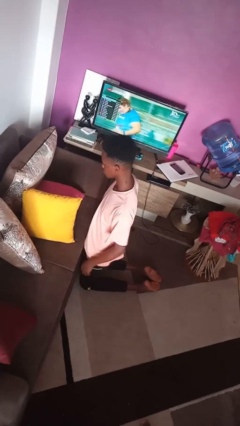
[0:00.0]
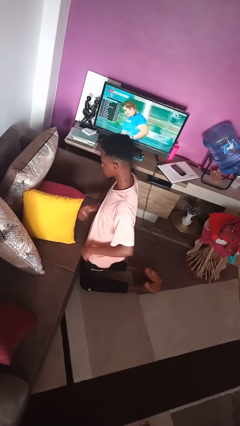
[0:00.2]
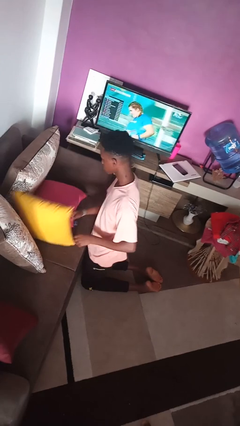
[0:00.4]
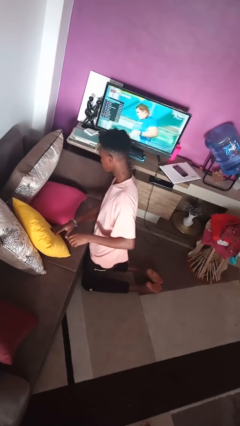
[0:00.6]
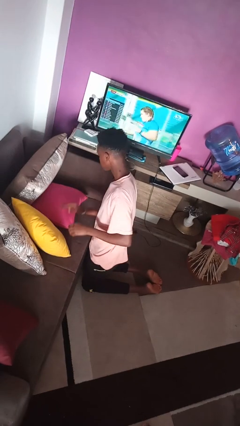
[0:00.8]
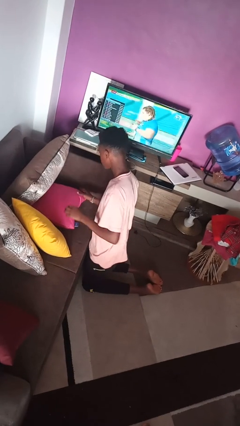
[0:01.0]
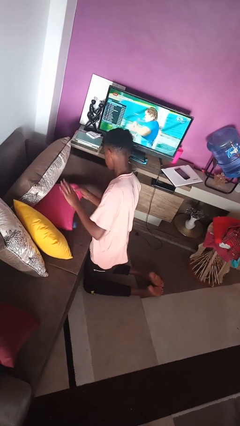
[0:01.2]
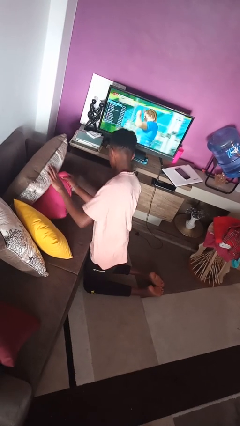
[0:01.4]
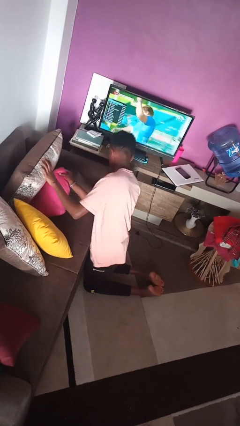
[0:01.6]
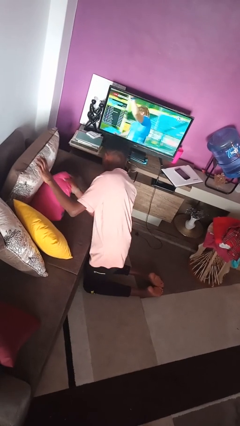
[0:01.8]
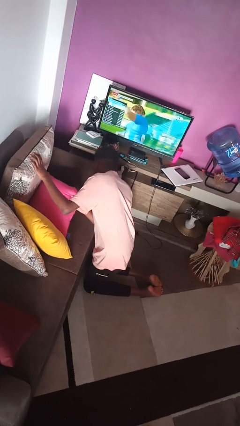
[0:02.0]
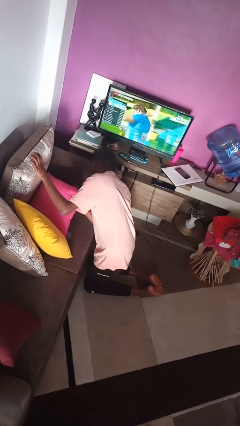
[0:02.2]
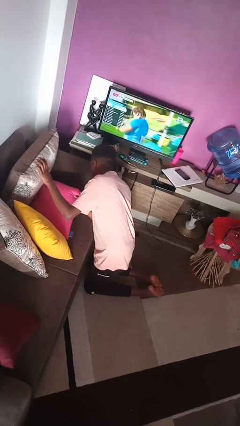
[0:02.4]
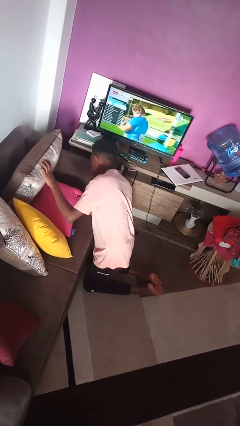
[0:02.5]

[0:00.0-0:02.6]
person searches in couch

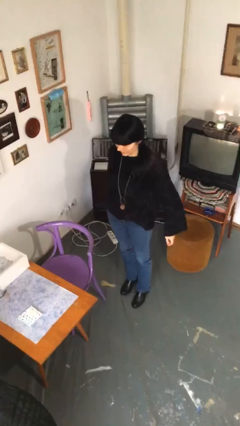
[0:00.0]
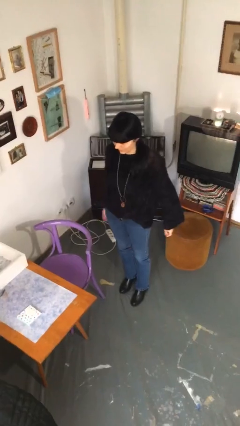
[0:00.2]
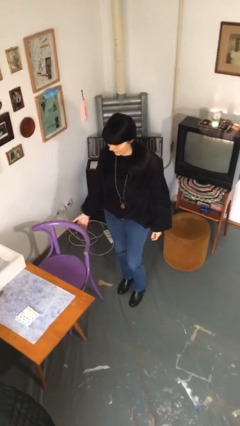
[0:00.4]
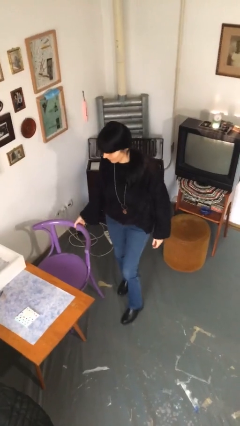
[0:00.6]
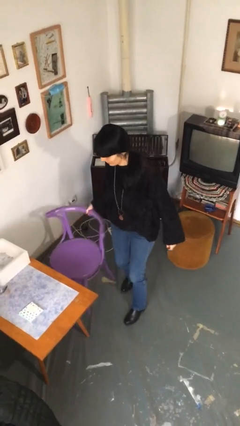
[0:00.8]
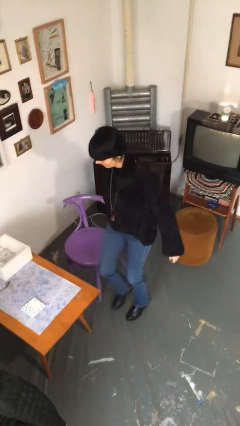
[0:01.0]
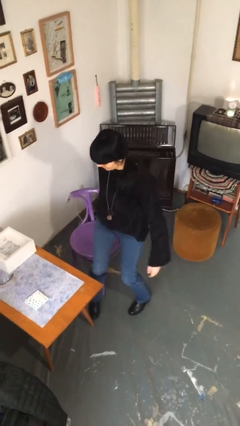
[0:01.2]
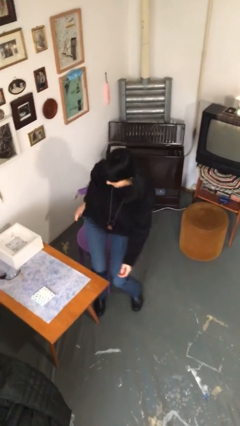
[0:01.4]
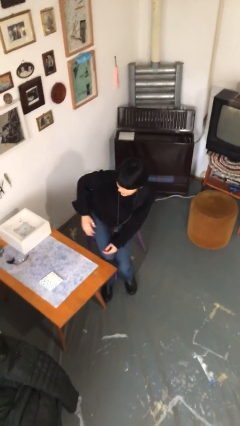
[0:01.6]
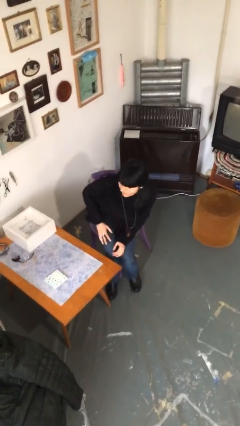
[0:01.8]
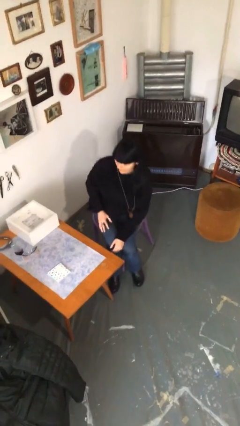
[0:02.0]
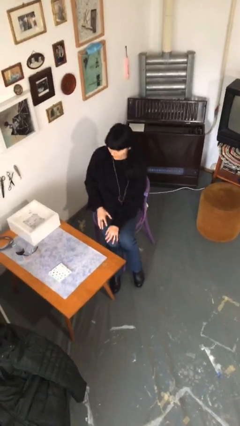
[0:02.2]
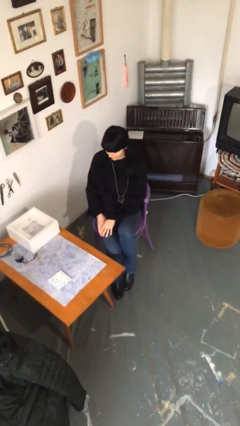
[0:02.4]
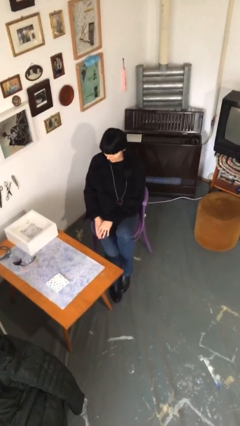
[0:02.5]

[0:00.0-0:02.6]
person sits down

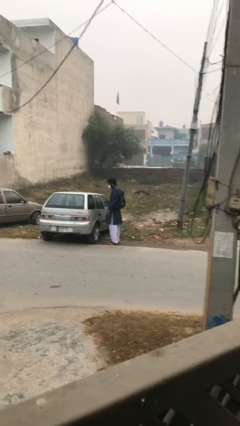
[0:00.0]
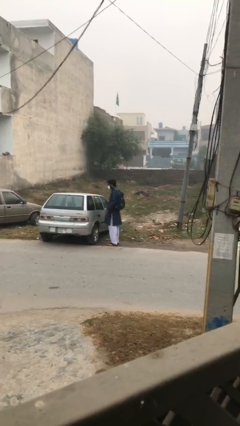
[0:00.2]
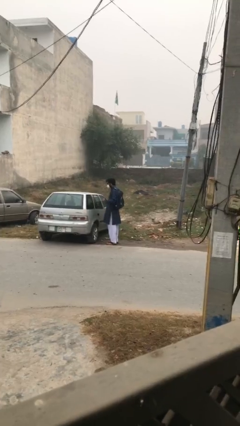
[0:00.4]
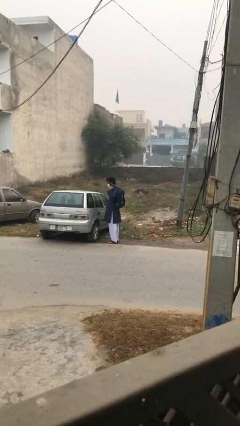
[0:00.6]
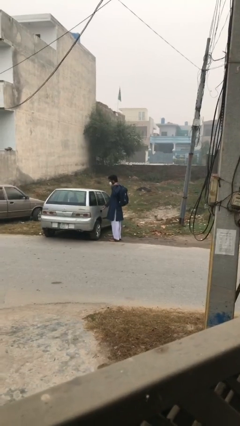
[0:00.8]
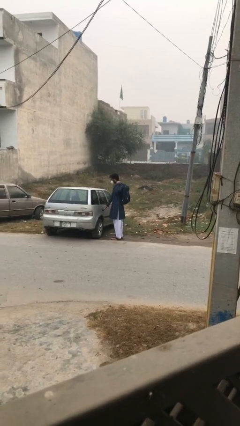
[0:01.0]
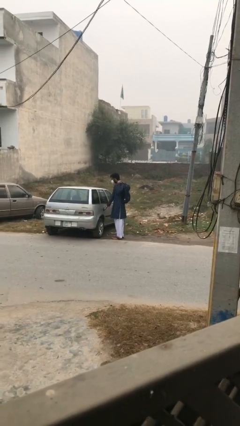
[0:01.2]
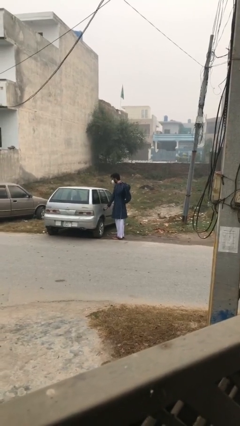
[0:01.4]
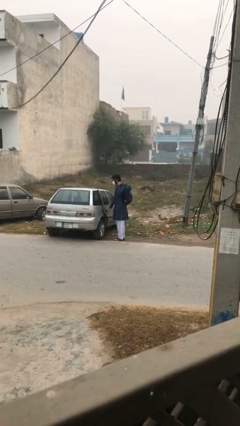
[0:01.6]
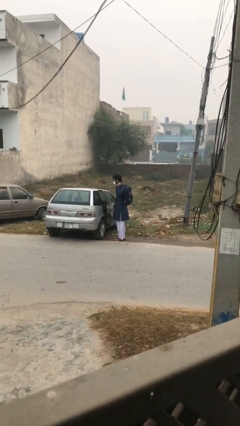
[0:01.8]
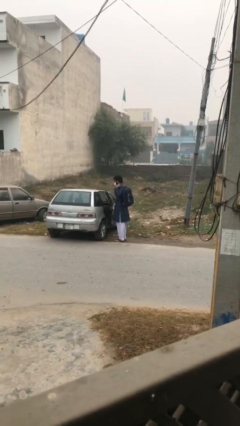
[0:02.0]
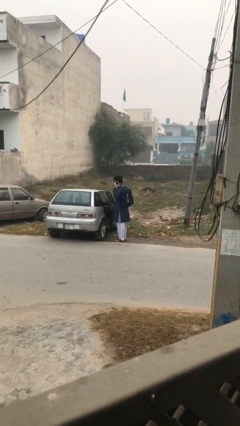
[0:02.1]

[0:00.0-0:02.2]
person opens car door

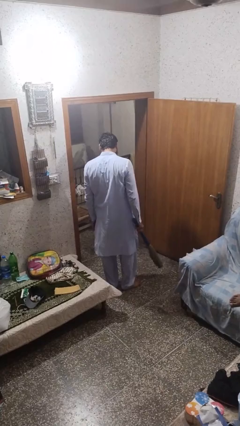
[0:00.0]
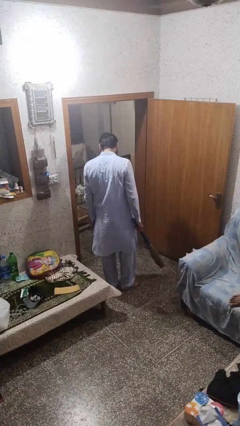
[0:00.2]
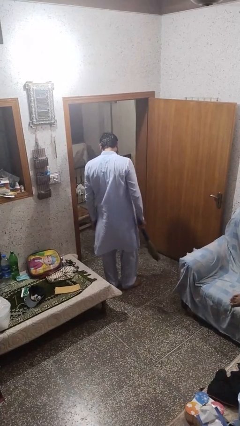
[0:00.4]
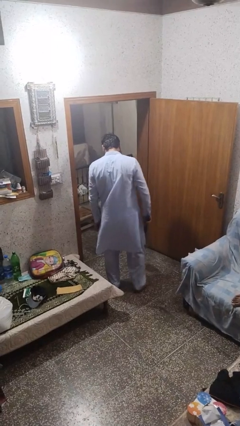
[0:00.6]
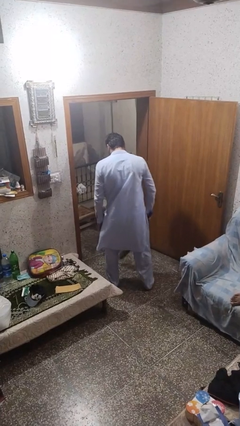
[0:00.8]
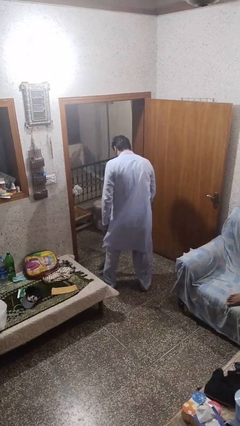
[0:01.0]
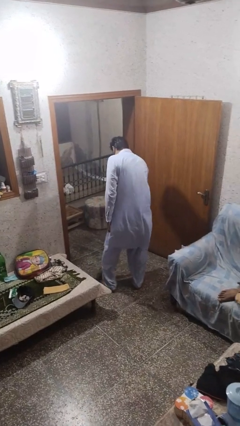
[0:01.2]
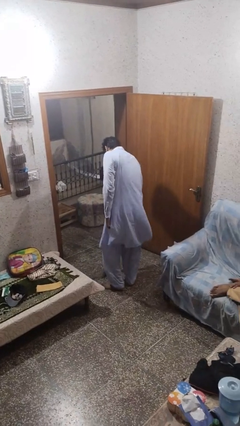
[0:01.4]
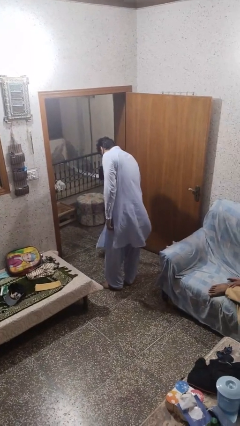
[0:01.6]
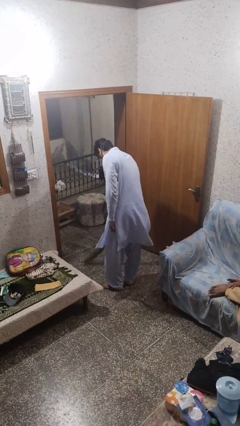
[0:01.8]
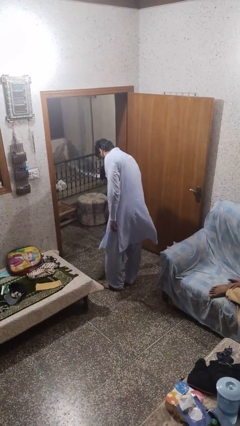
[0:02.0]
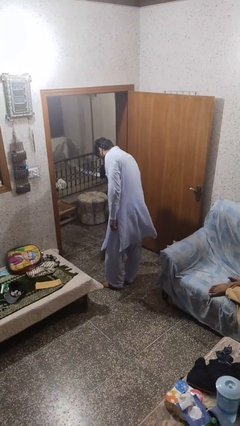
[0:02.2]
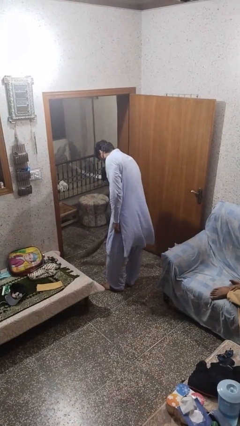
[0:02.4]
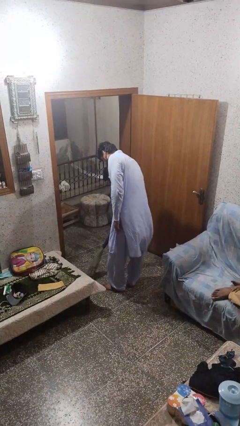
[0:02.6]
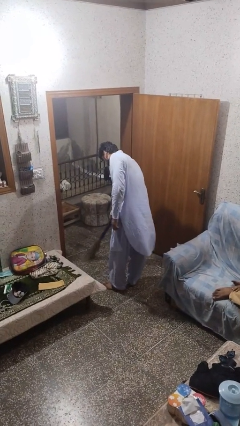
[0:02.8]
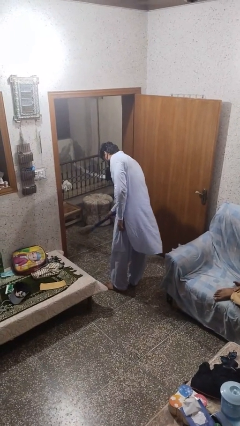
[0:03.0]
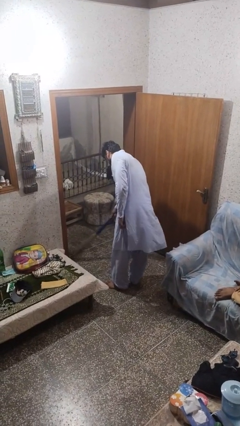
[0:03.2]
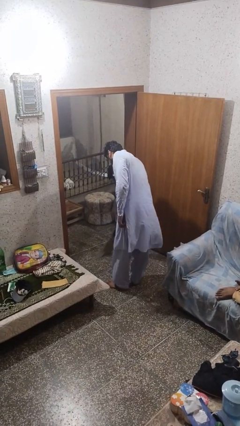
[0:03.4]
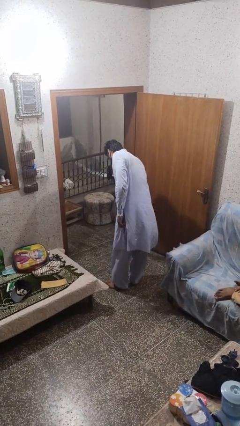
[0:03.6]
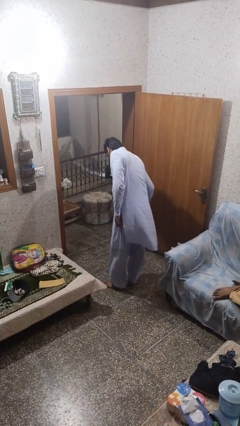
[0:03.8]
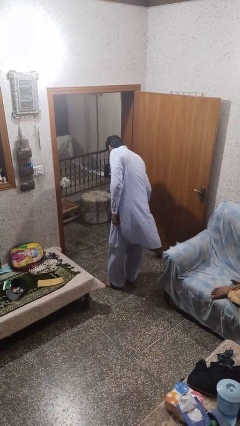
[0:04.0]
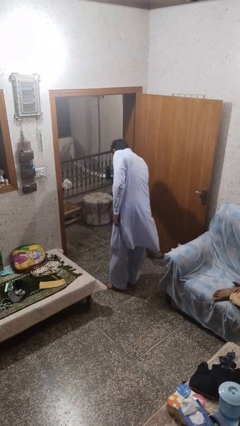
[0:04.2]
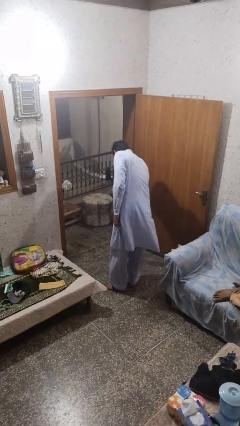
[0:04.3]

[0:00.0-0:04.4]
person sweeps floor

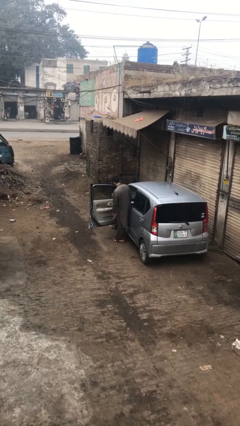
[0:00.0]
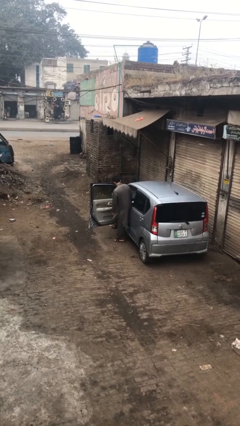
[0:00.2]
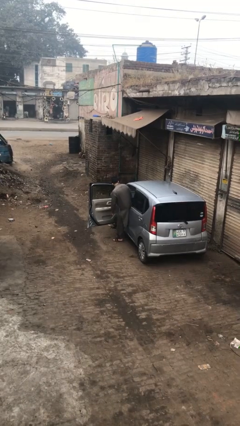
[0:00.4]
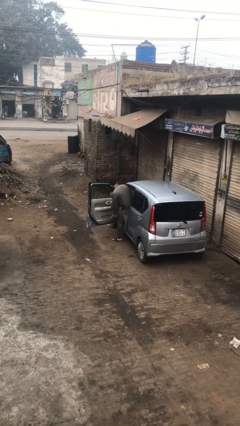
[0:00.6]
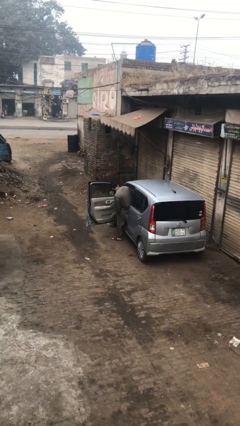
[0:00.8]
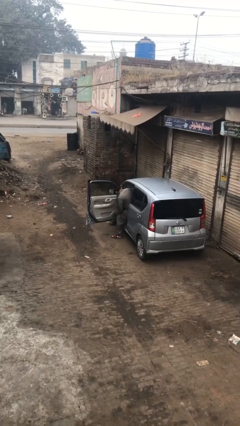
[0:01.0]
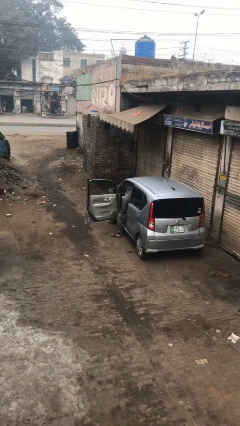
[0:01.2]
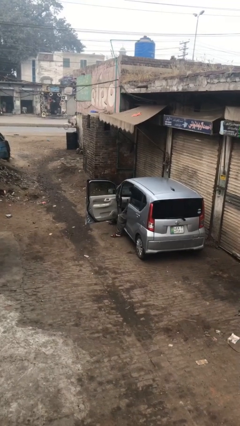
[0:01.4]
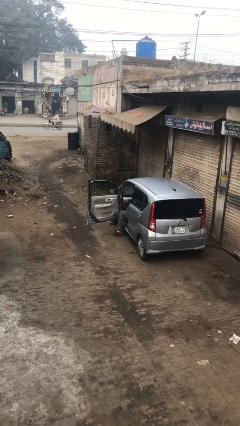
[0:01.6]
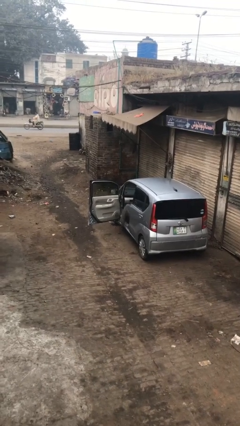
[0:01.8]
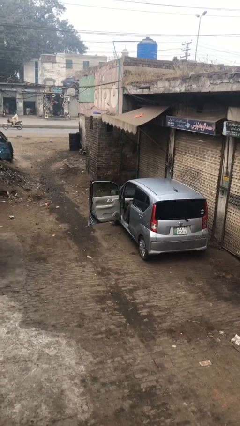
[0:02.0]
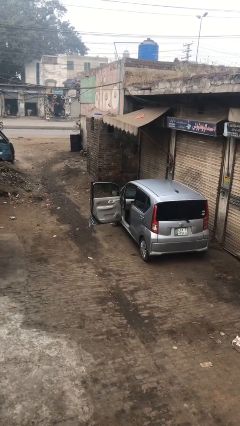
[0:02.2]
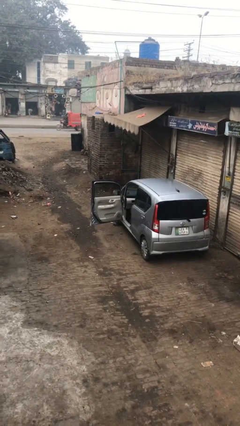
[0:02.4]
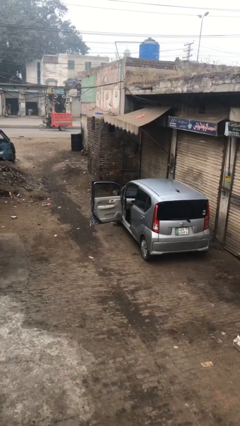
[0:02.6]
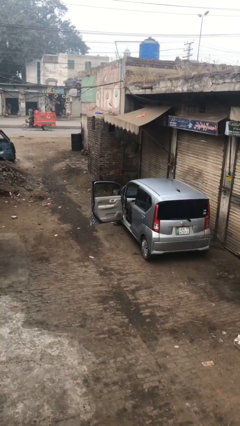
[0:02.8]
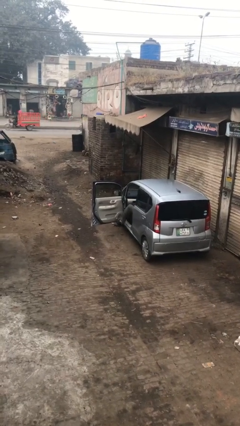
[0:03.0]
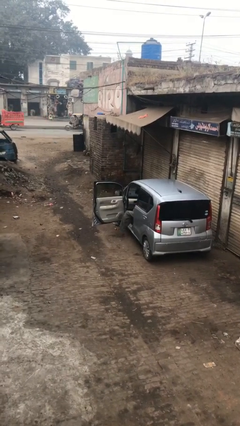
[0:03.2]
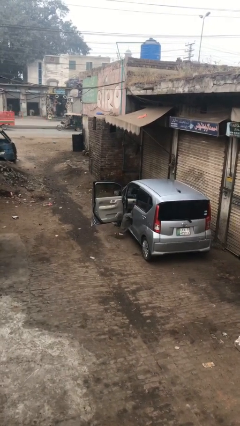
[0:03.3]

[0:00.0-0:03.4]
person enters car

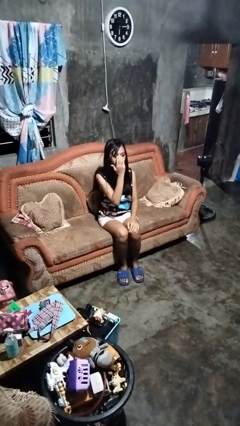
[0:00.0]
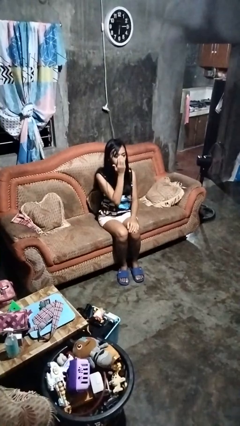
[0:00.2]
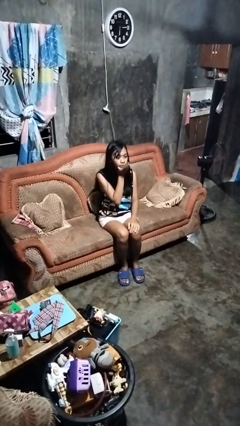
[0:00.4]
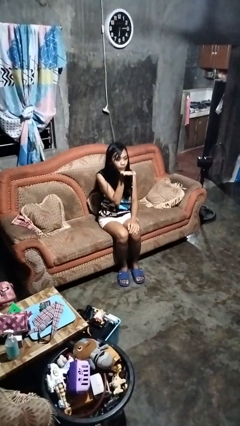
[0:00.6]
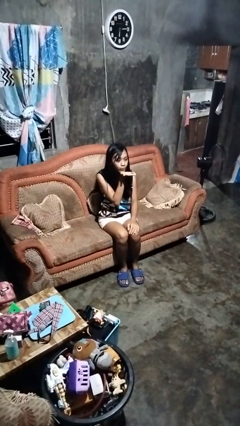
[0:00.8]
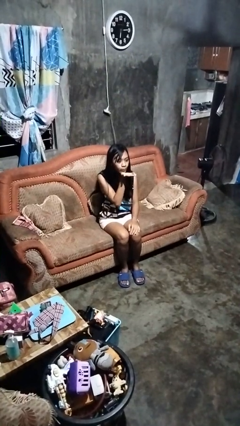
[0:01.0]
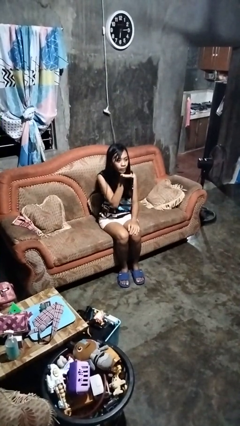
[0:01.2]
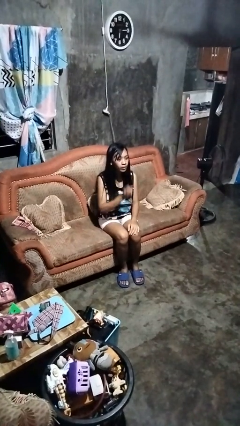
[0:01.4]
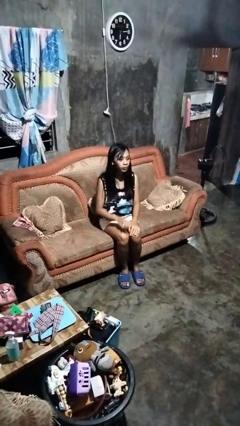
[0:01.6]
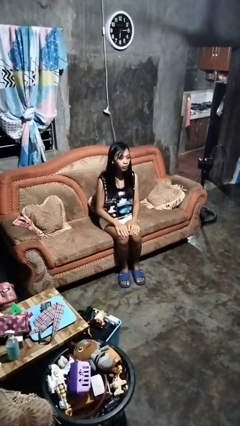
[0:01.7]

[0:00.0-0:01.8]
person gestures blow kiss
